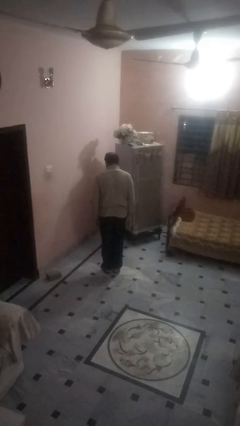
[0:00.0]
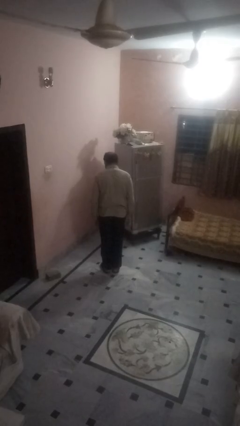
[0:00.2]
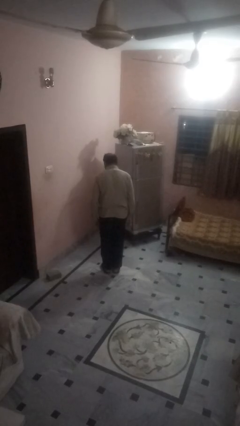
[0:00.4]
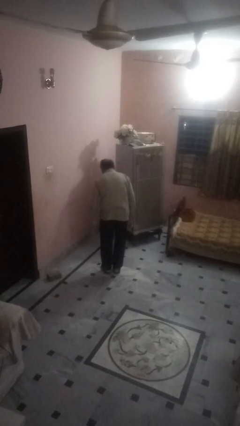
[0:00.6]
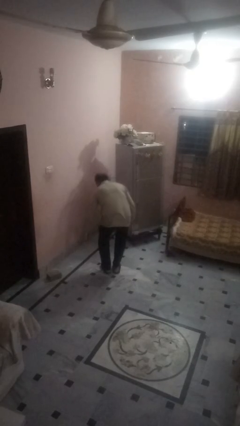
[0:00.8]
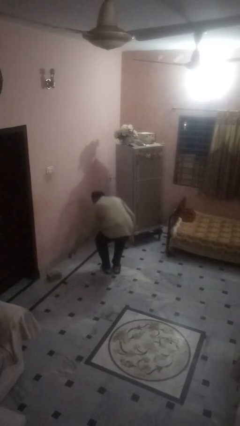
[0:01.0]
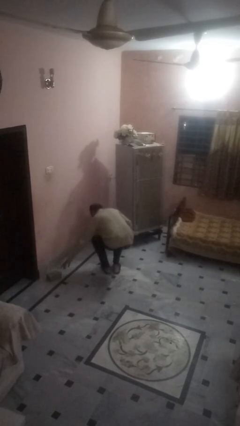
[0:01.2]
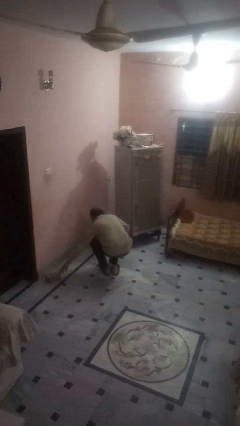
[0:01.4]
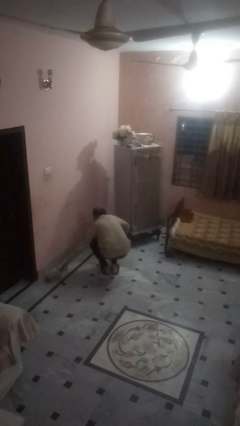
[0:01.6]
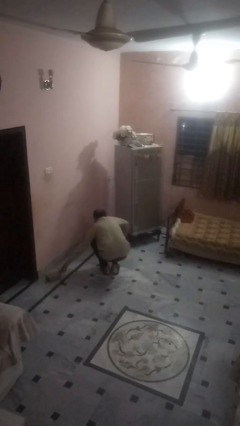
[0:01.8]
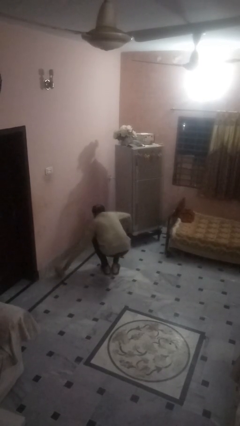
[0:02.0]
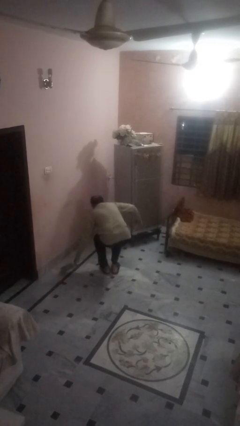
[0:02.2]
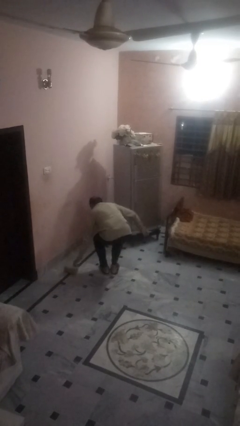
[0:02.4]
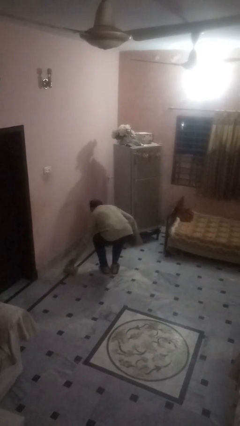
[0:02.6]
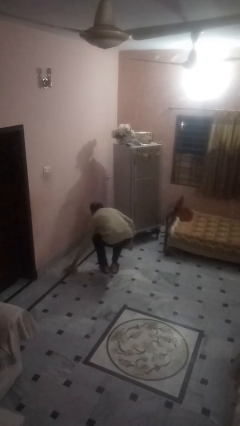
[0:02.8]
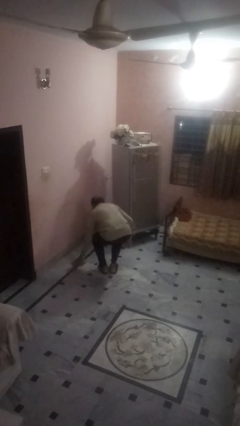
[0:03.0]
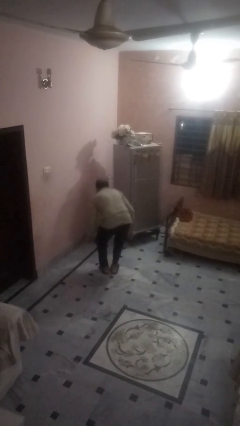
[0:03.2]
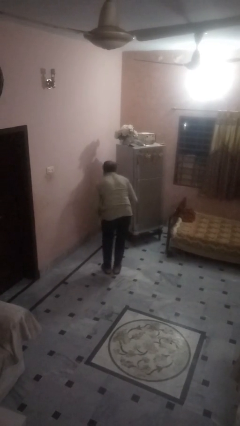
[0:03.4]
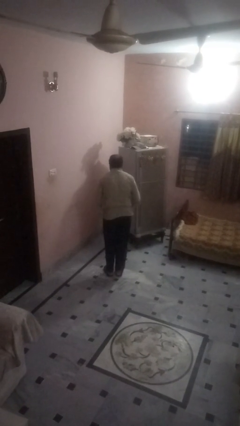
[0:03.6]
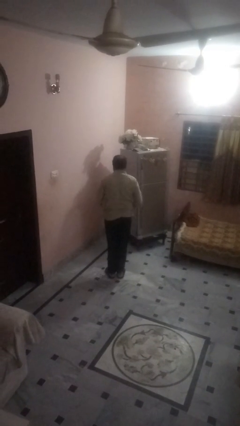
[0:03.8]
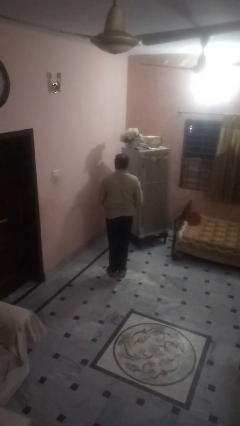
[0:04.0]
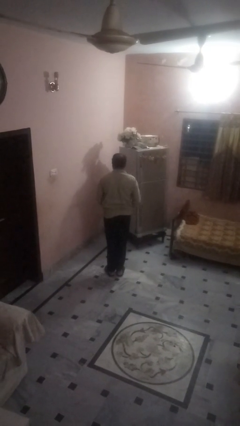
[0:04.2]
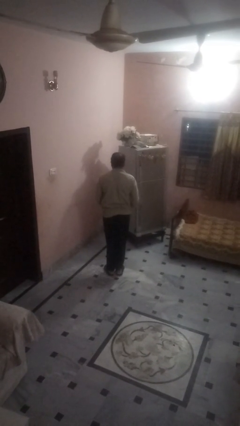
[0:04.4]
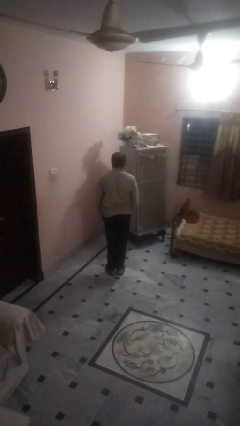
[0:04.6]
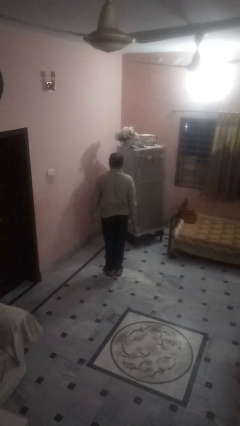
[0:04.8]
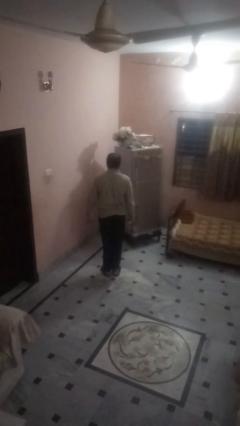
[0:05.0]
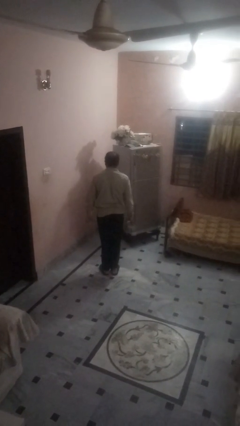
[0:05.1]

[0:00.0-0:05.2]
person picks up object from floor

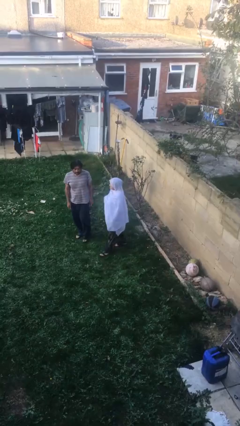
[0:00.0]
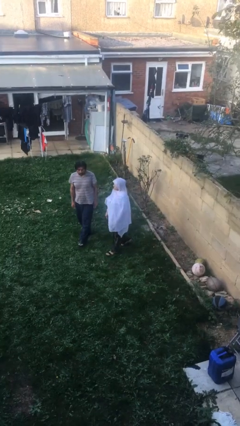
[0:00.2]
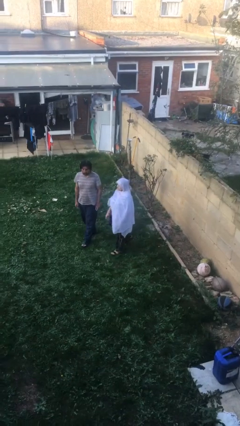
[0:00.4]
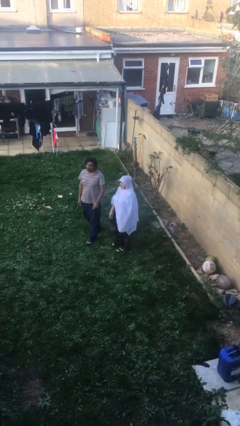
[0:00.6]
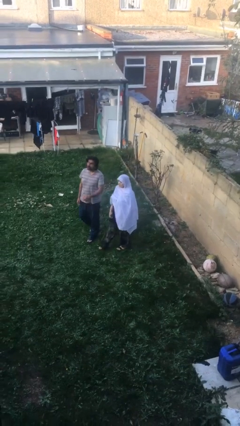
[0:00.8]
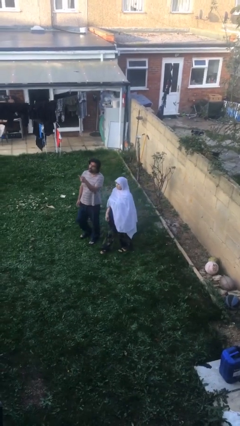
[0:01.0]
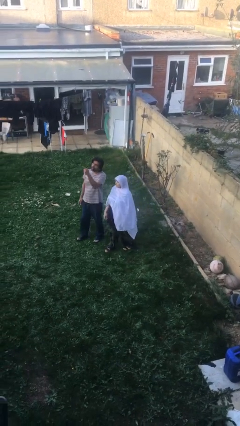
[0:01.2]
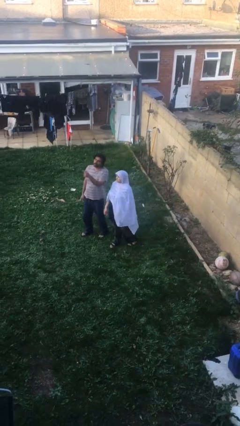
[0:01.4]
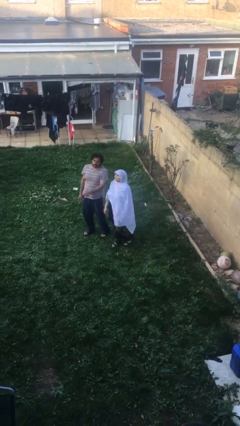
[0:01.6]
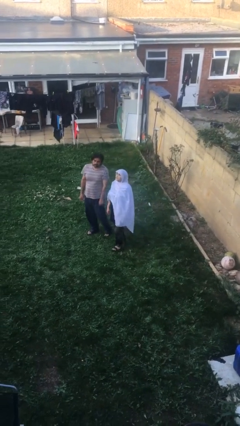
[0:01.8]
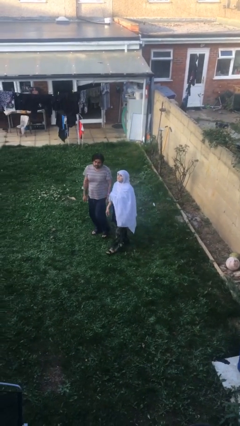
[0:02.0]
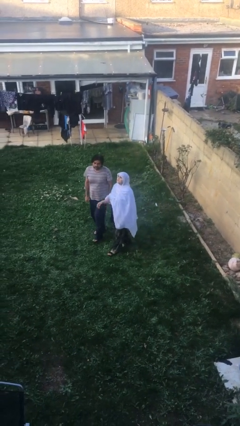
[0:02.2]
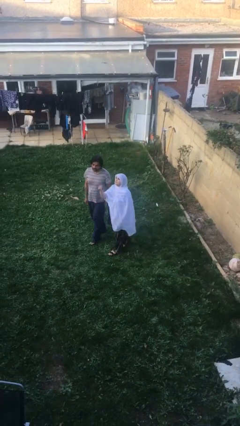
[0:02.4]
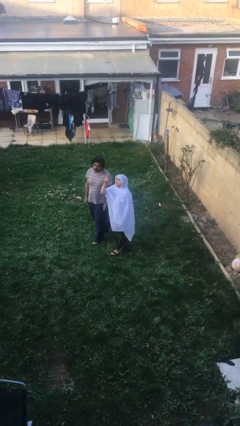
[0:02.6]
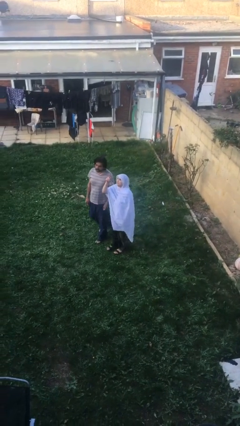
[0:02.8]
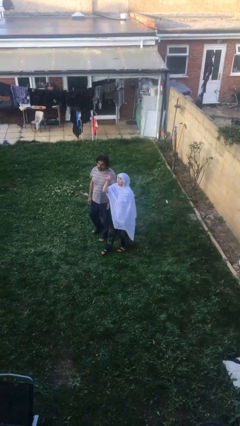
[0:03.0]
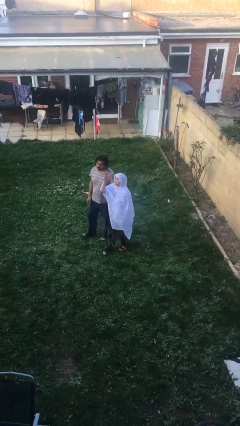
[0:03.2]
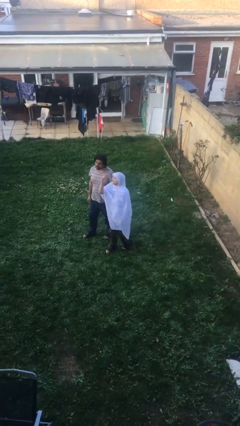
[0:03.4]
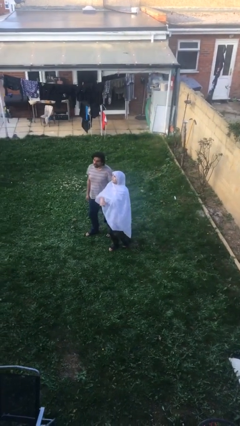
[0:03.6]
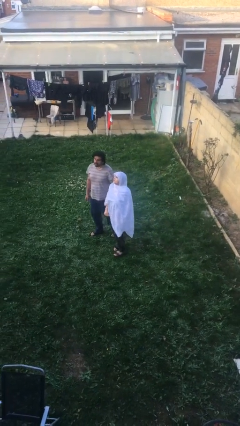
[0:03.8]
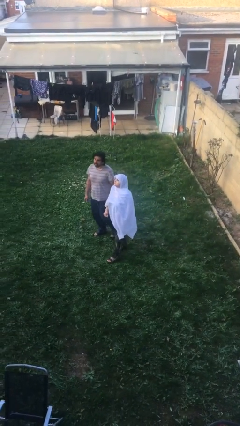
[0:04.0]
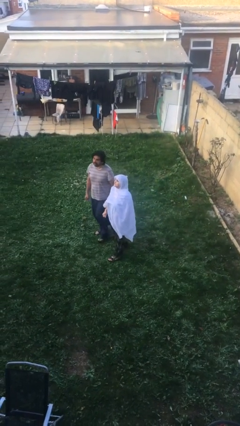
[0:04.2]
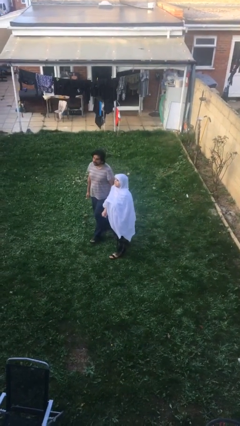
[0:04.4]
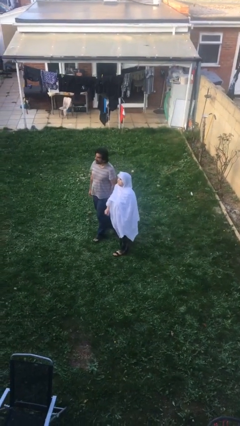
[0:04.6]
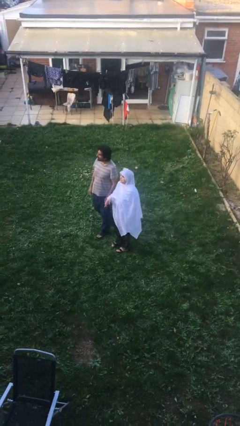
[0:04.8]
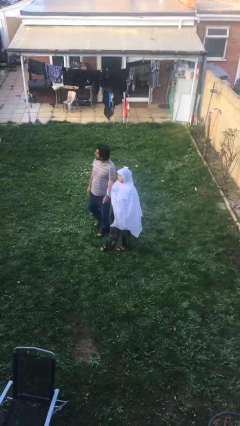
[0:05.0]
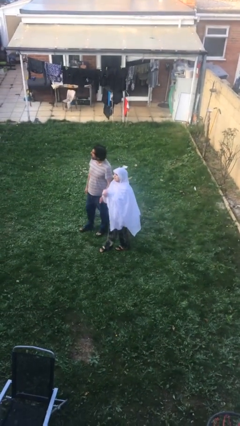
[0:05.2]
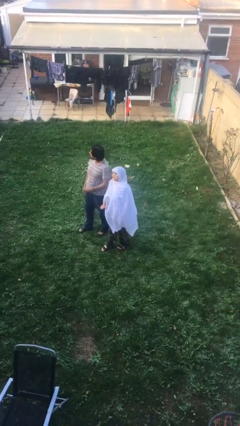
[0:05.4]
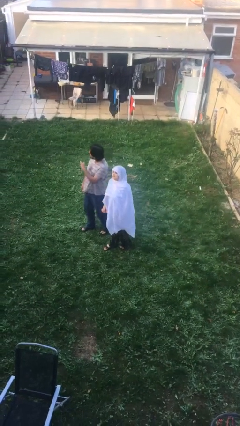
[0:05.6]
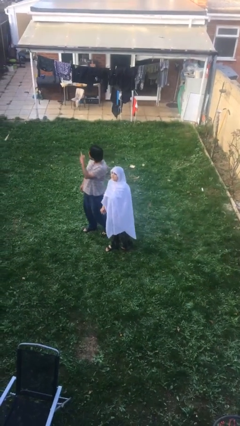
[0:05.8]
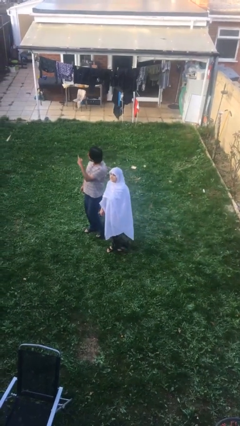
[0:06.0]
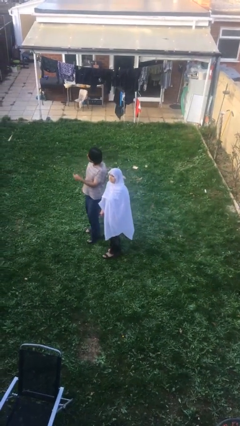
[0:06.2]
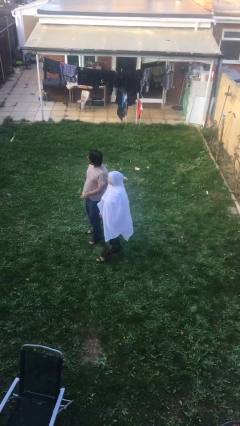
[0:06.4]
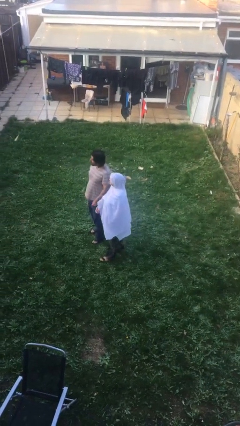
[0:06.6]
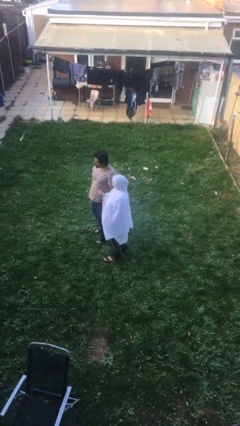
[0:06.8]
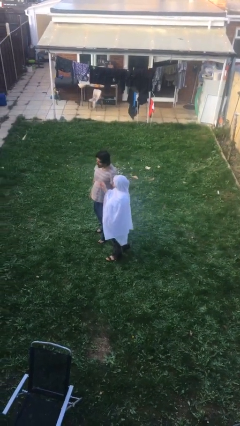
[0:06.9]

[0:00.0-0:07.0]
person talks to person

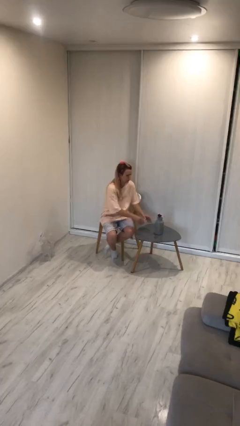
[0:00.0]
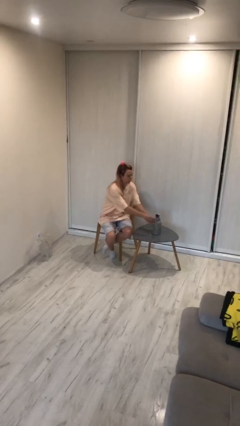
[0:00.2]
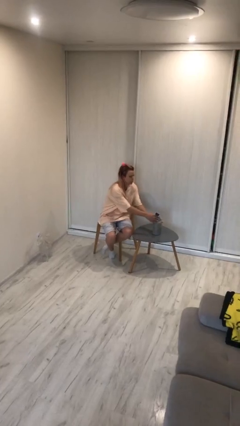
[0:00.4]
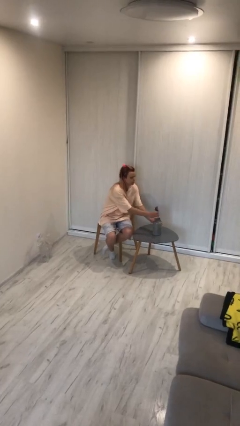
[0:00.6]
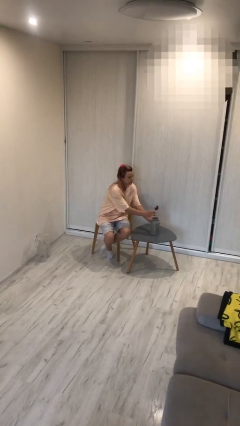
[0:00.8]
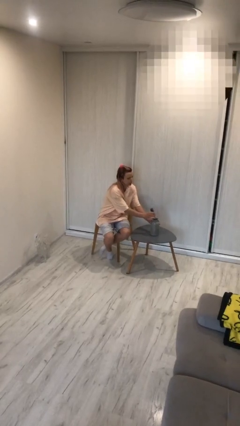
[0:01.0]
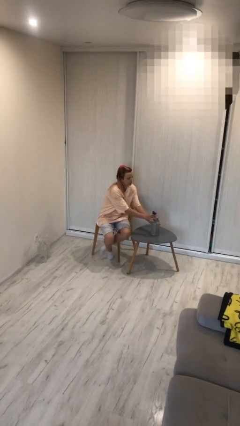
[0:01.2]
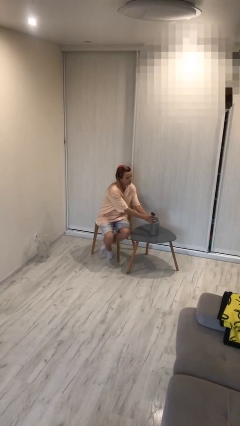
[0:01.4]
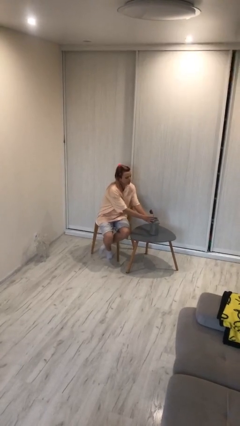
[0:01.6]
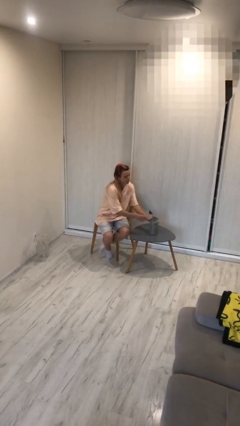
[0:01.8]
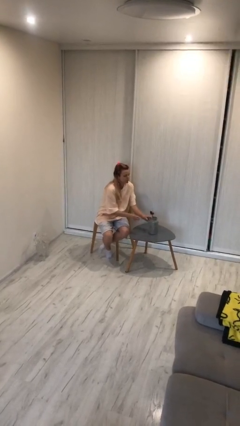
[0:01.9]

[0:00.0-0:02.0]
person arranges flowers in vase

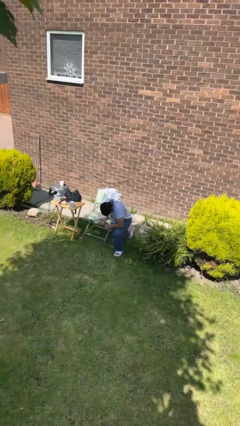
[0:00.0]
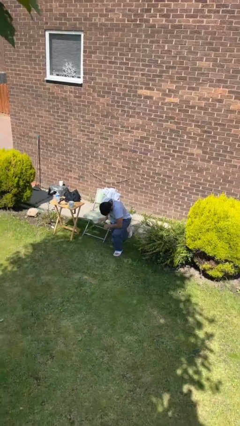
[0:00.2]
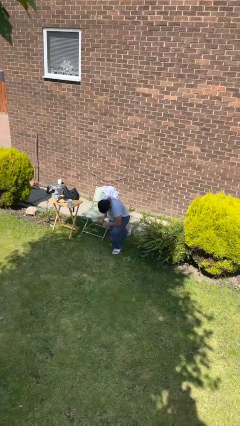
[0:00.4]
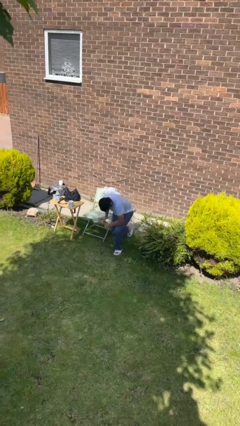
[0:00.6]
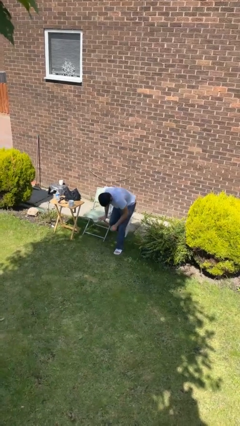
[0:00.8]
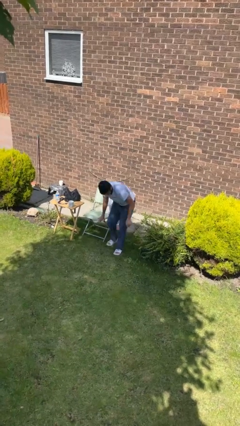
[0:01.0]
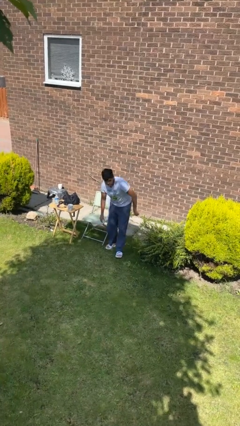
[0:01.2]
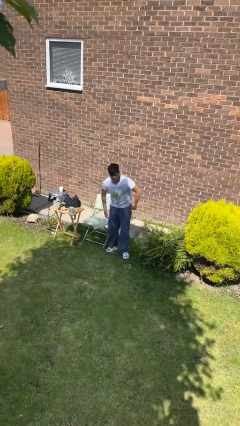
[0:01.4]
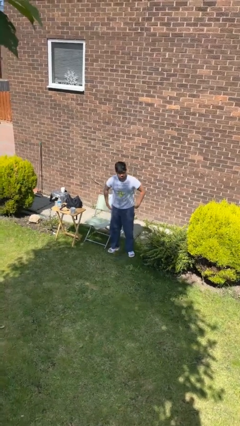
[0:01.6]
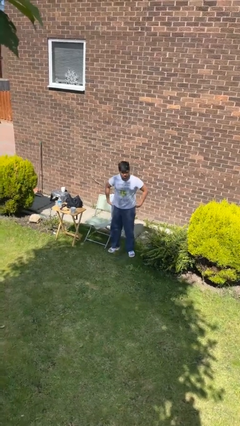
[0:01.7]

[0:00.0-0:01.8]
person stands up from floor

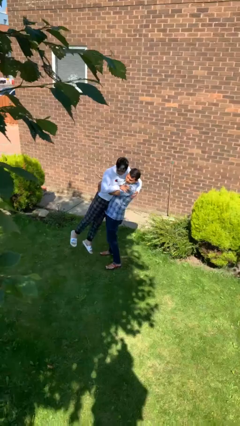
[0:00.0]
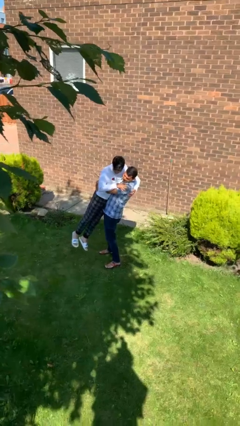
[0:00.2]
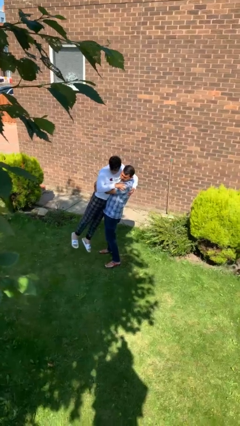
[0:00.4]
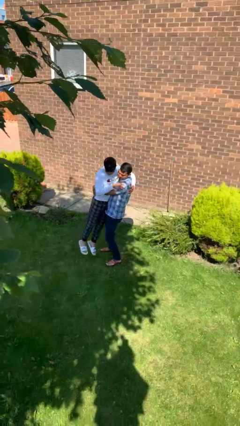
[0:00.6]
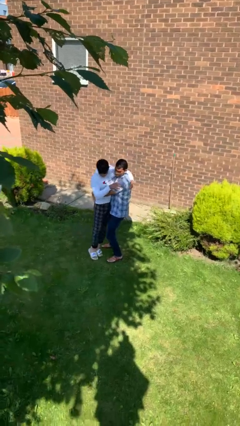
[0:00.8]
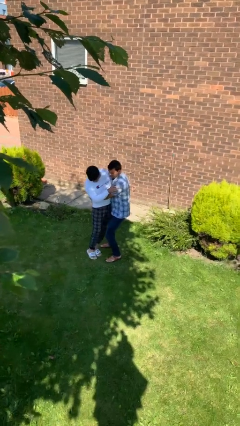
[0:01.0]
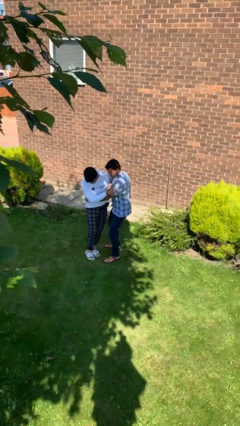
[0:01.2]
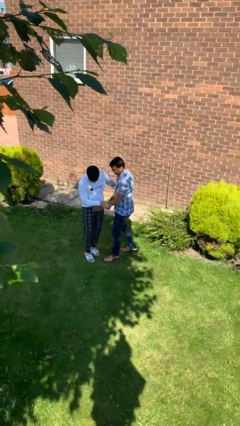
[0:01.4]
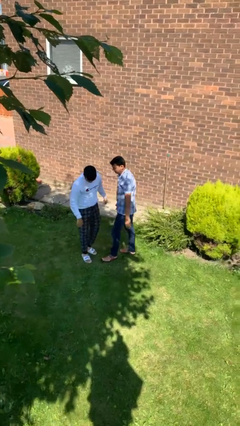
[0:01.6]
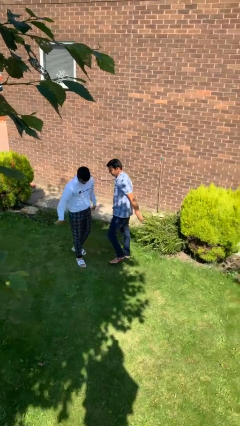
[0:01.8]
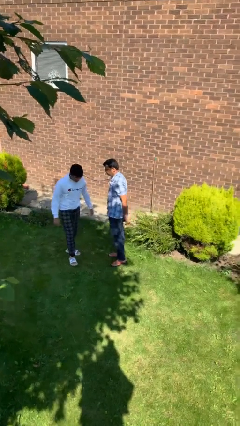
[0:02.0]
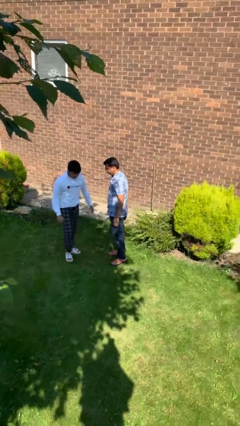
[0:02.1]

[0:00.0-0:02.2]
person puts down person
